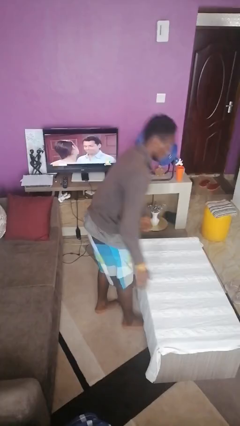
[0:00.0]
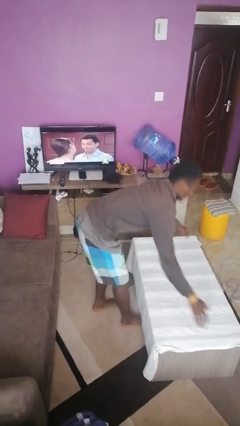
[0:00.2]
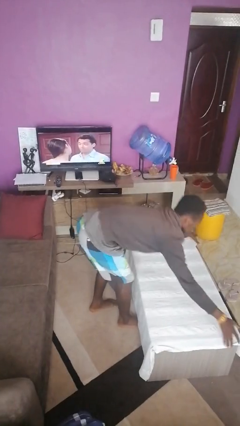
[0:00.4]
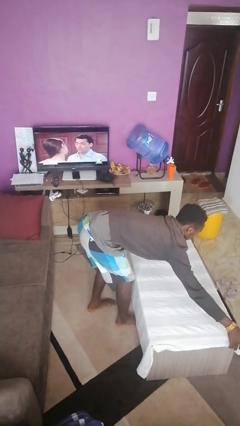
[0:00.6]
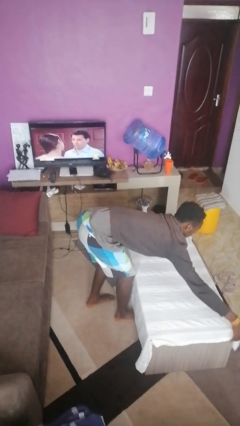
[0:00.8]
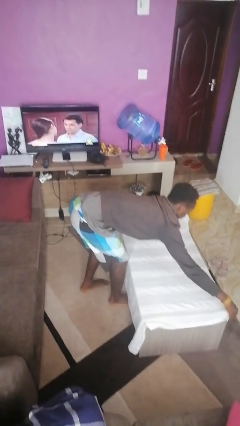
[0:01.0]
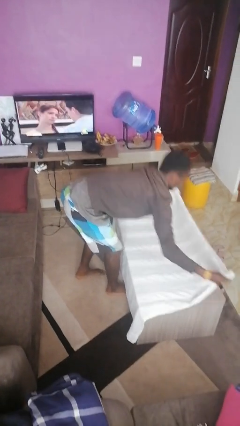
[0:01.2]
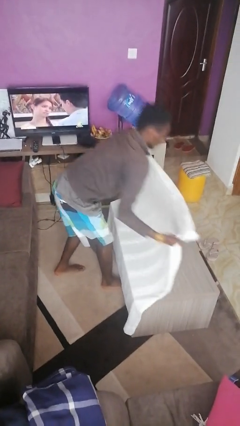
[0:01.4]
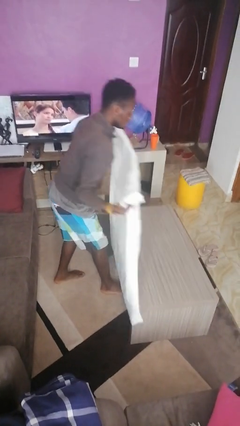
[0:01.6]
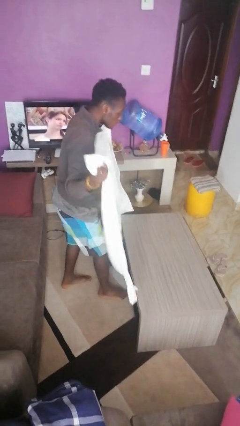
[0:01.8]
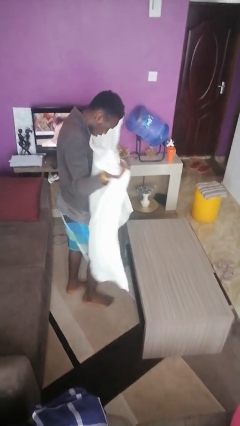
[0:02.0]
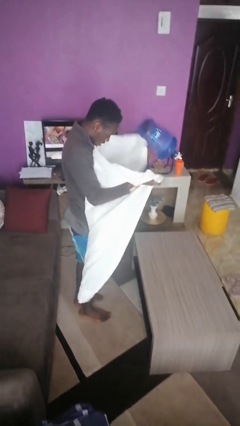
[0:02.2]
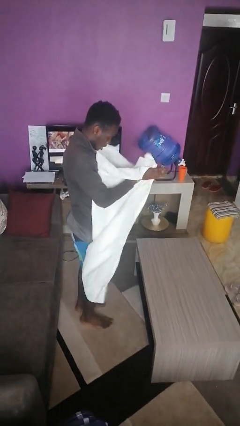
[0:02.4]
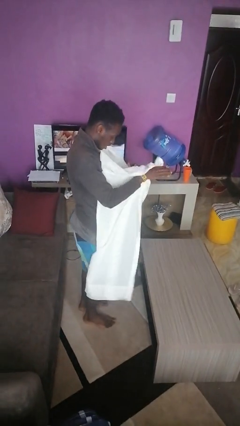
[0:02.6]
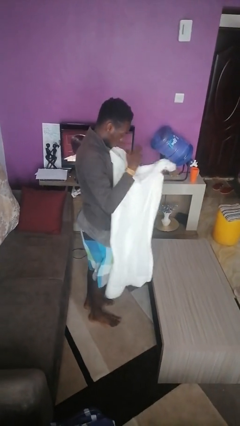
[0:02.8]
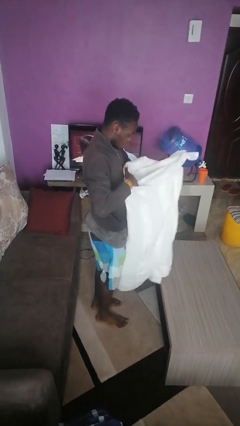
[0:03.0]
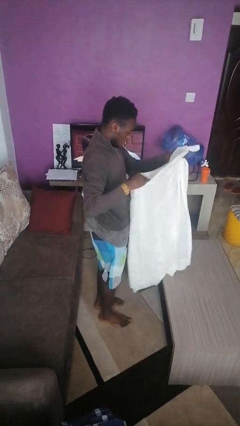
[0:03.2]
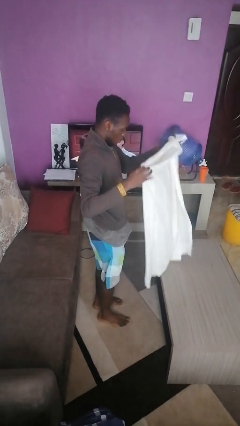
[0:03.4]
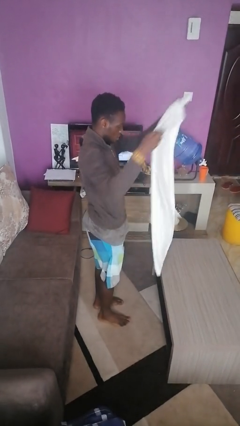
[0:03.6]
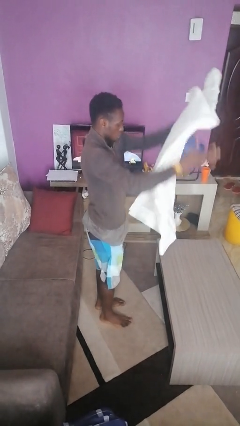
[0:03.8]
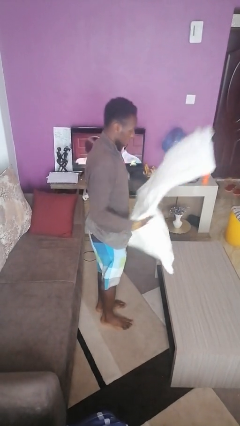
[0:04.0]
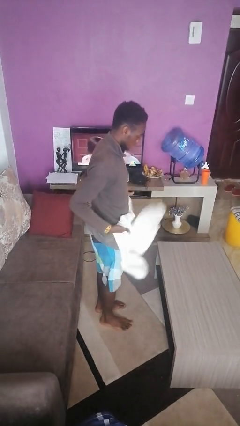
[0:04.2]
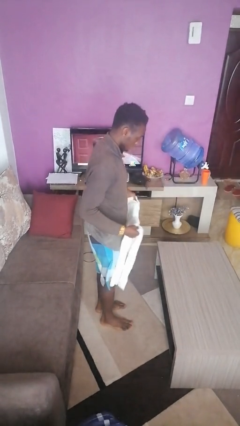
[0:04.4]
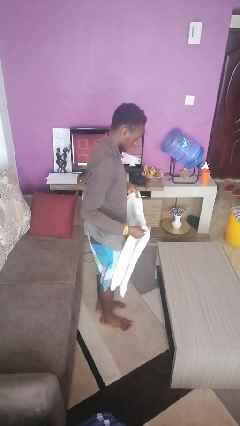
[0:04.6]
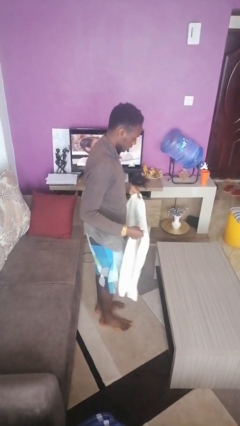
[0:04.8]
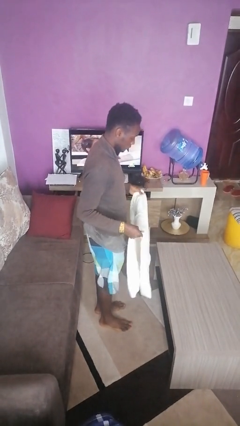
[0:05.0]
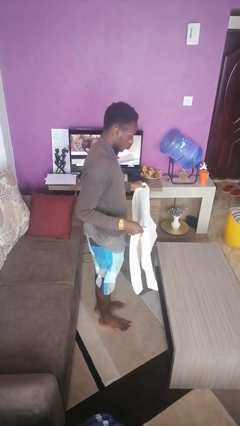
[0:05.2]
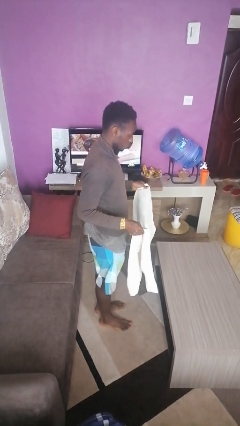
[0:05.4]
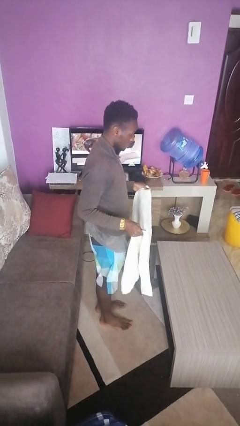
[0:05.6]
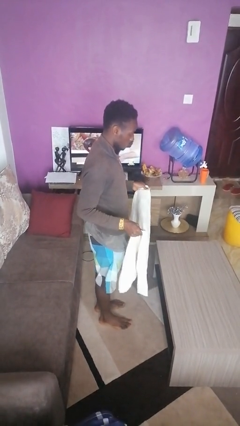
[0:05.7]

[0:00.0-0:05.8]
person folds tablecloth

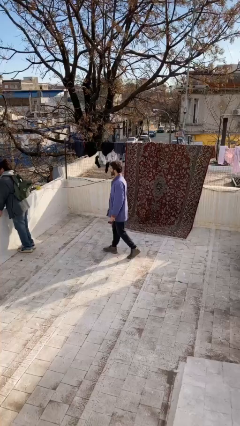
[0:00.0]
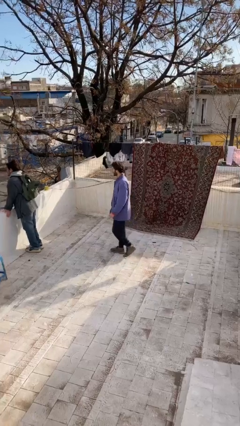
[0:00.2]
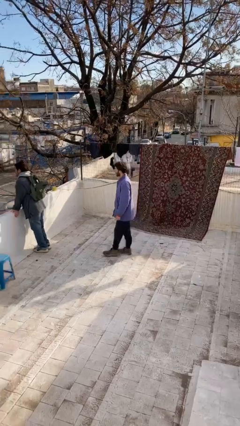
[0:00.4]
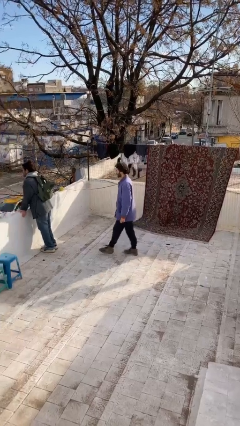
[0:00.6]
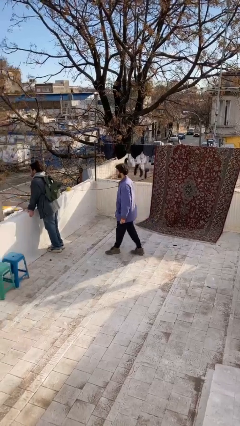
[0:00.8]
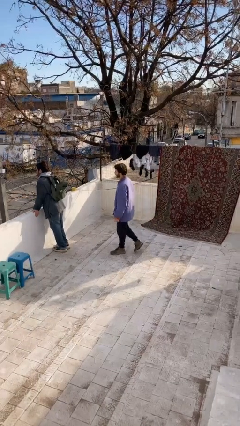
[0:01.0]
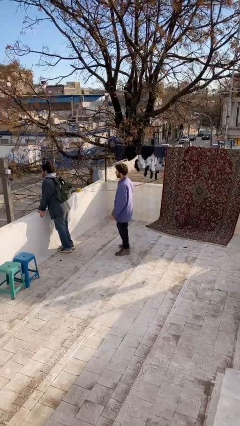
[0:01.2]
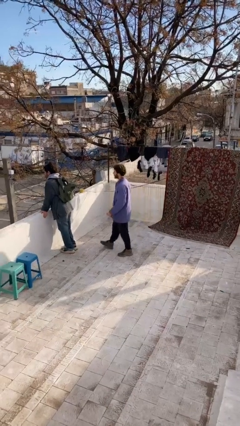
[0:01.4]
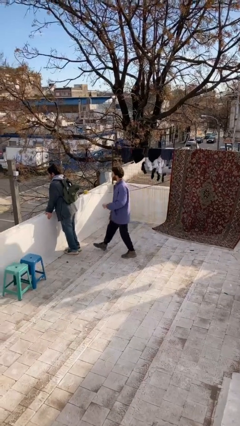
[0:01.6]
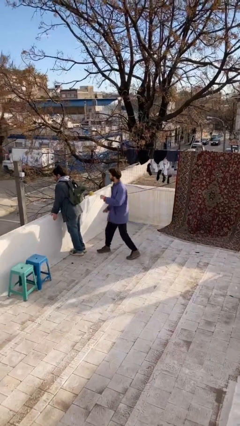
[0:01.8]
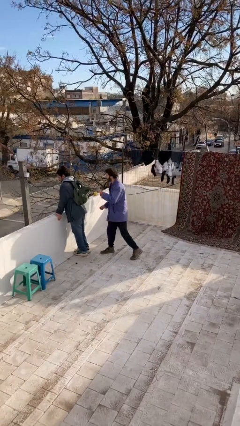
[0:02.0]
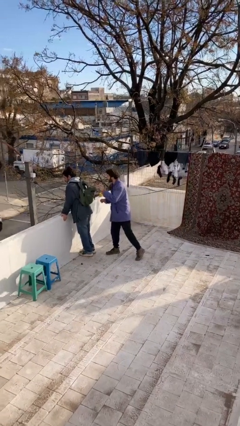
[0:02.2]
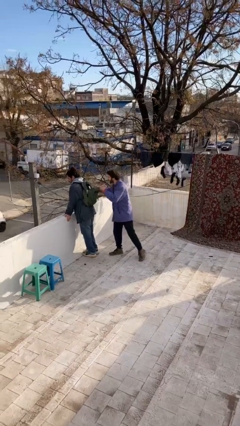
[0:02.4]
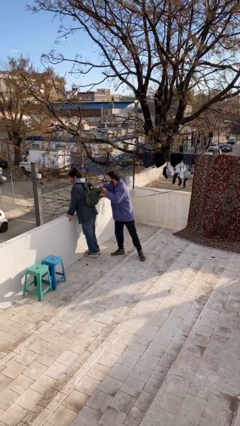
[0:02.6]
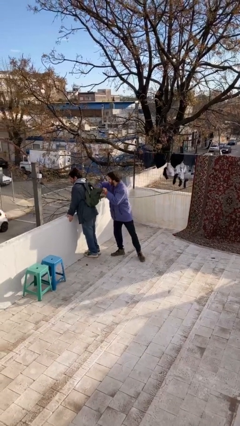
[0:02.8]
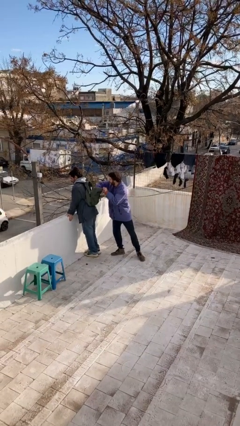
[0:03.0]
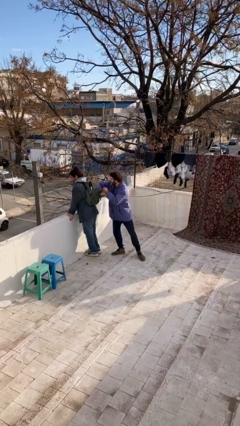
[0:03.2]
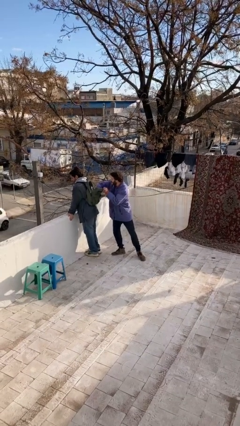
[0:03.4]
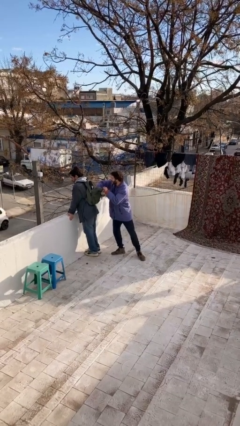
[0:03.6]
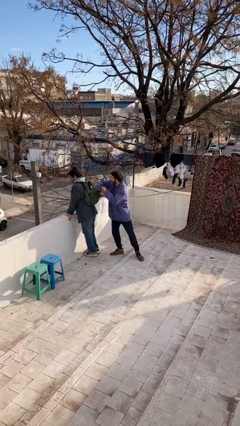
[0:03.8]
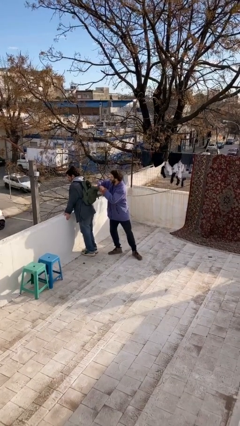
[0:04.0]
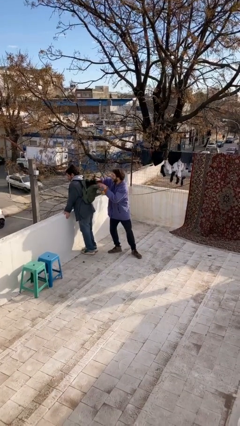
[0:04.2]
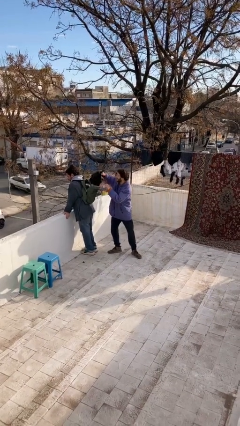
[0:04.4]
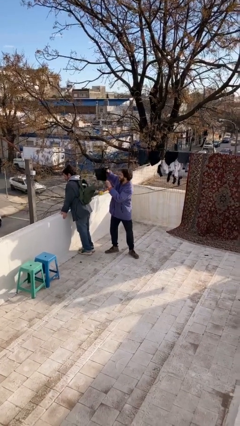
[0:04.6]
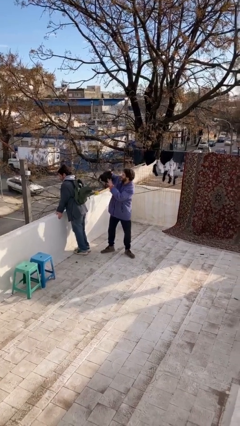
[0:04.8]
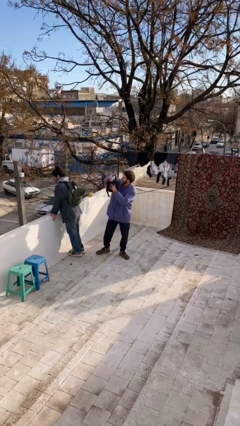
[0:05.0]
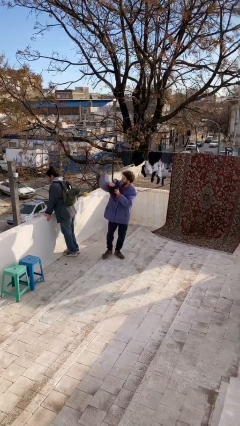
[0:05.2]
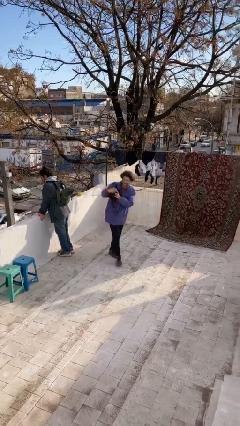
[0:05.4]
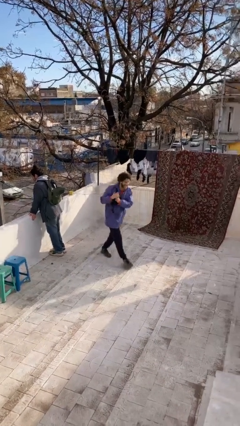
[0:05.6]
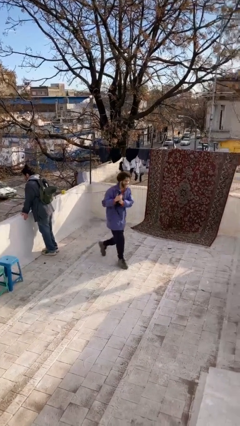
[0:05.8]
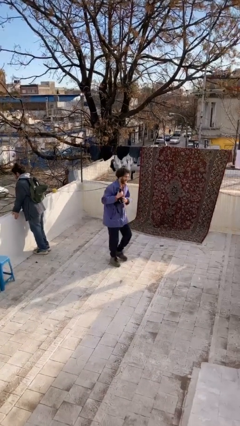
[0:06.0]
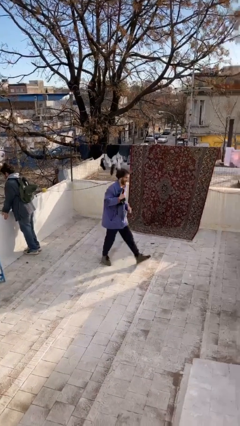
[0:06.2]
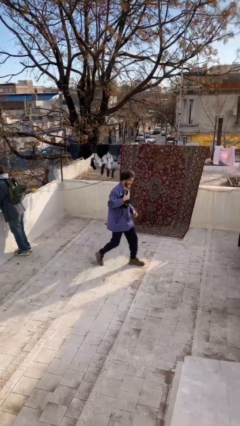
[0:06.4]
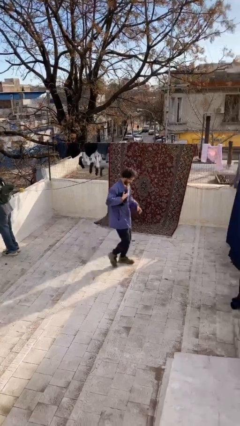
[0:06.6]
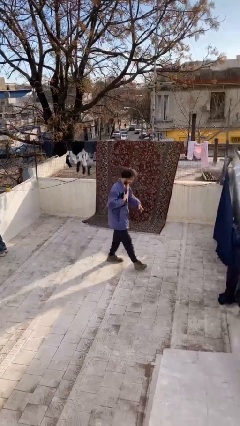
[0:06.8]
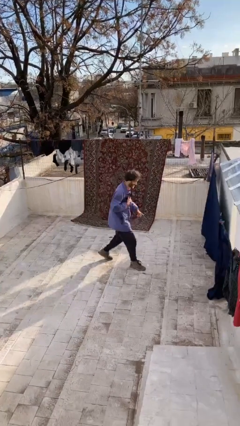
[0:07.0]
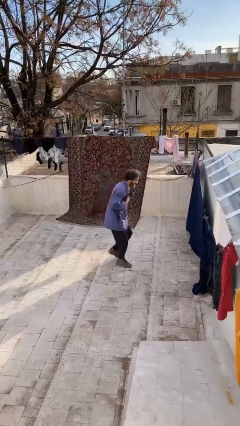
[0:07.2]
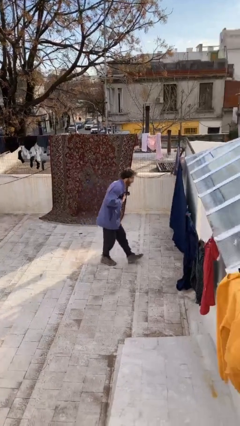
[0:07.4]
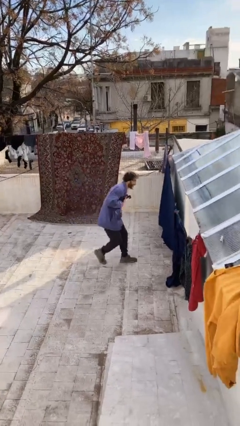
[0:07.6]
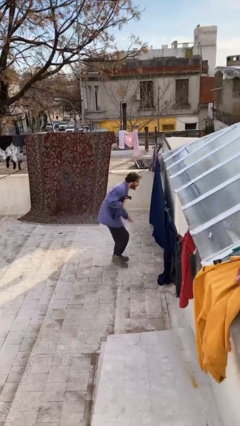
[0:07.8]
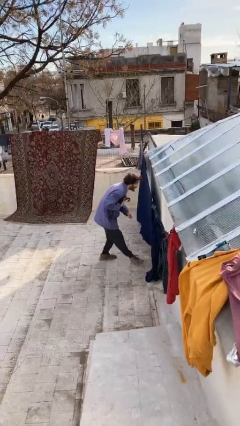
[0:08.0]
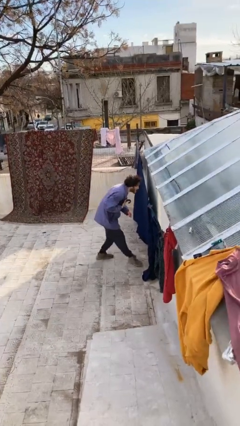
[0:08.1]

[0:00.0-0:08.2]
person steals object from person

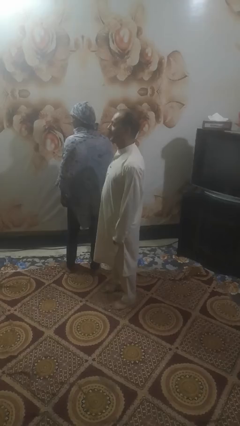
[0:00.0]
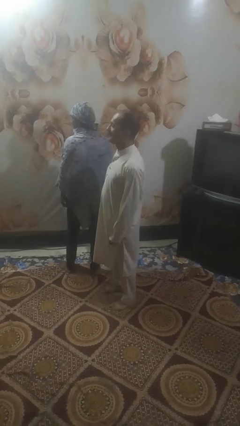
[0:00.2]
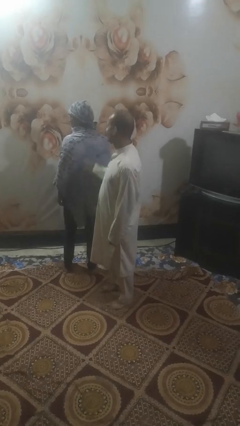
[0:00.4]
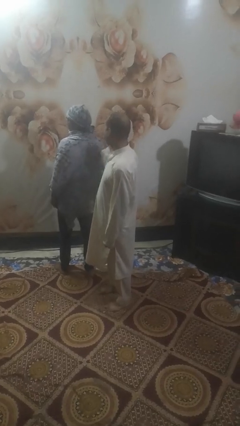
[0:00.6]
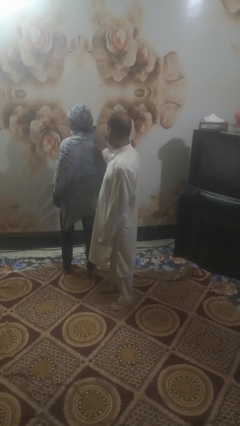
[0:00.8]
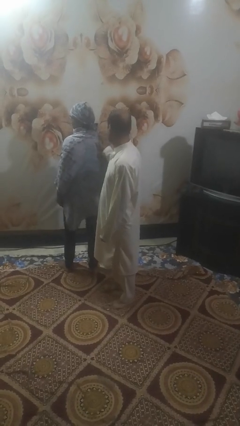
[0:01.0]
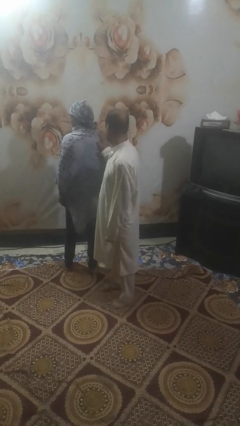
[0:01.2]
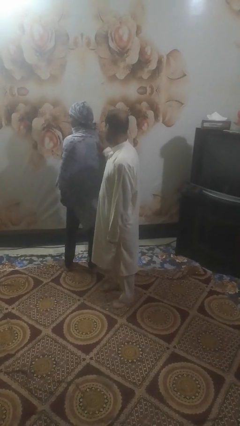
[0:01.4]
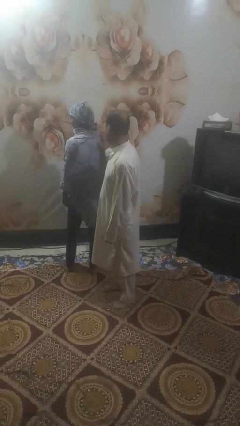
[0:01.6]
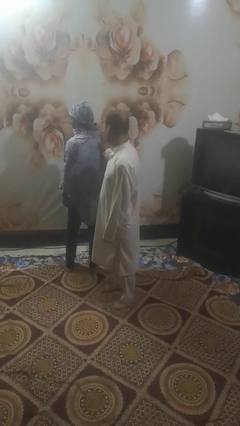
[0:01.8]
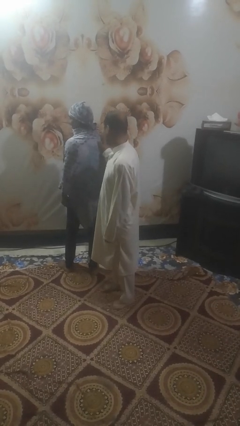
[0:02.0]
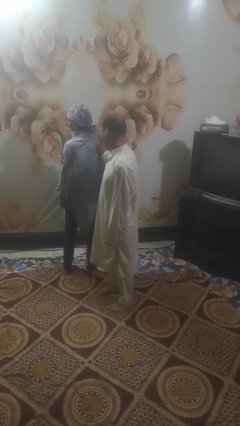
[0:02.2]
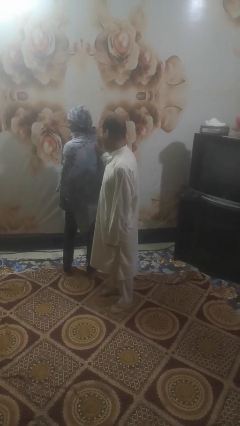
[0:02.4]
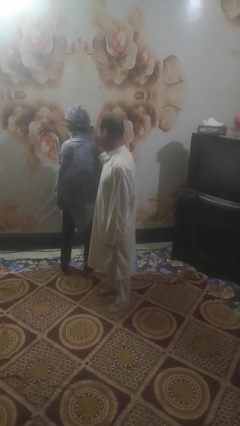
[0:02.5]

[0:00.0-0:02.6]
person touches back of person

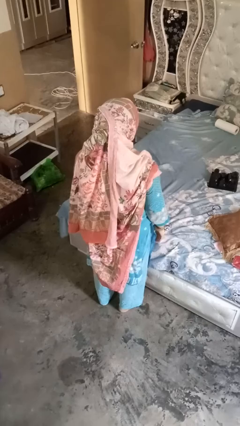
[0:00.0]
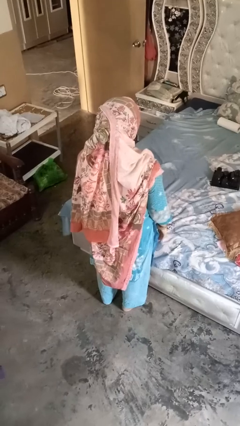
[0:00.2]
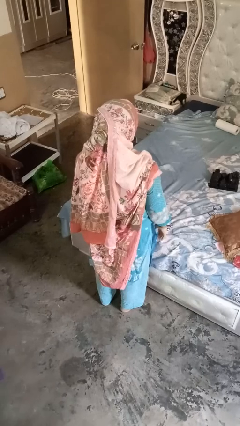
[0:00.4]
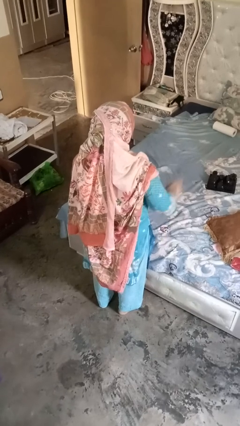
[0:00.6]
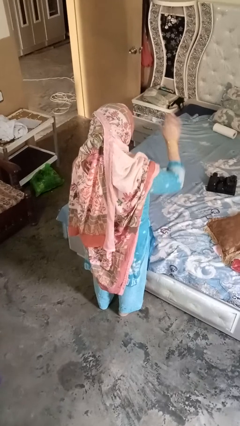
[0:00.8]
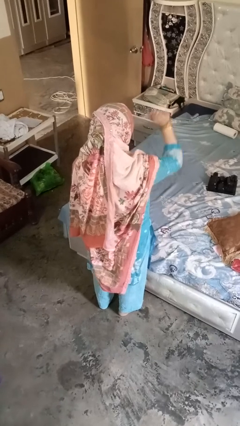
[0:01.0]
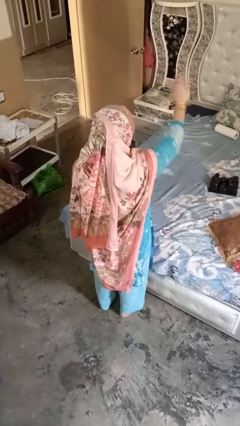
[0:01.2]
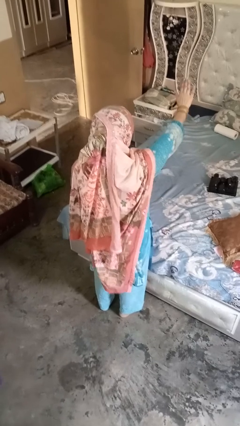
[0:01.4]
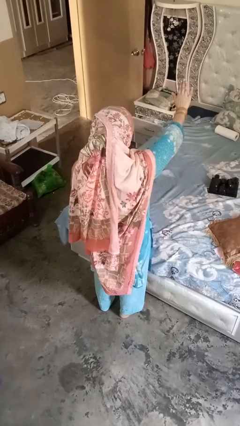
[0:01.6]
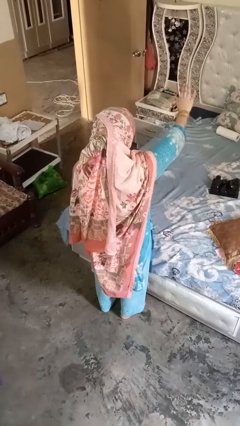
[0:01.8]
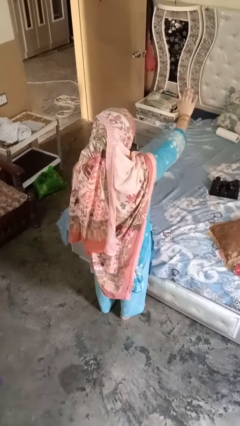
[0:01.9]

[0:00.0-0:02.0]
person gestures stop
